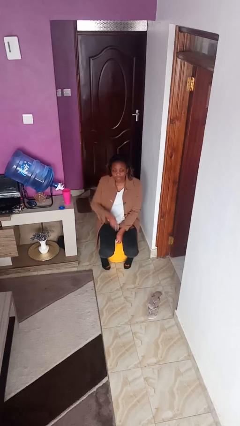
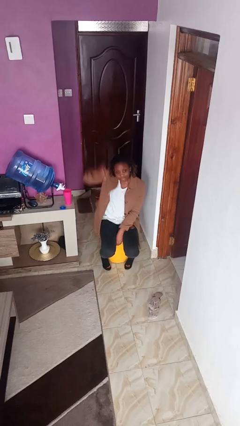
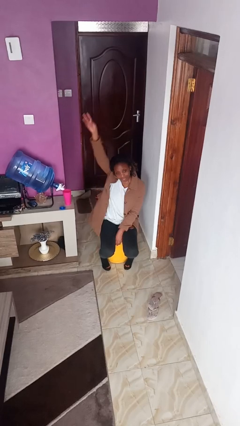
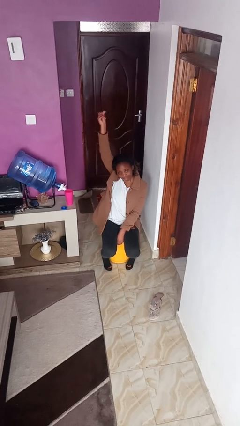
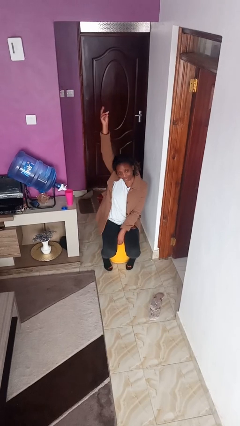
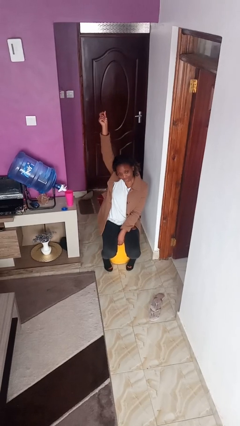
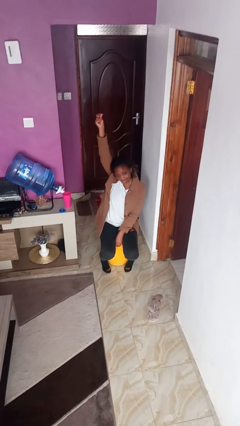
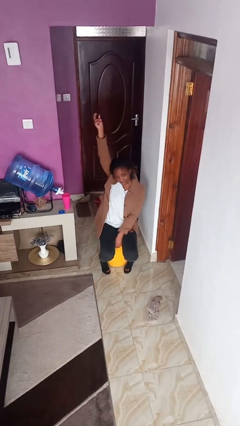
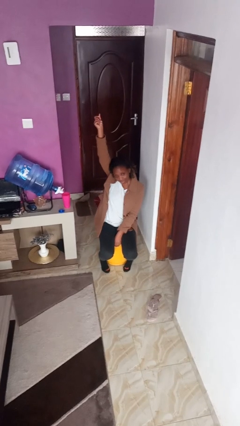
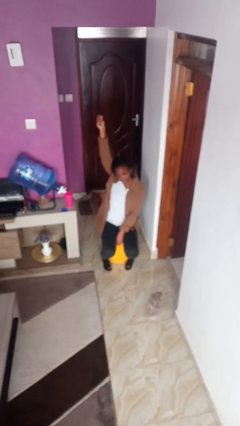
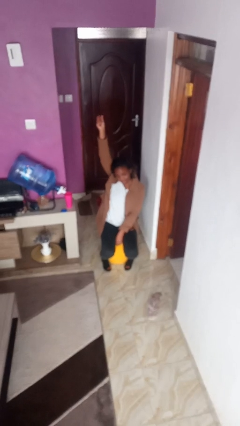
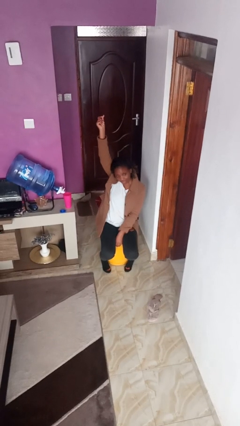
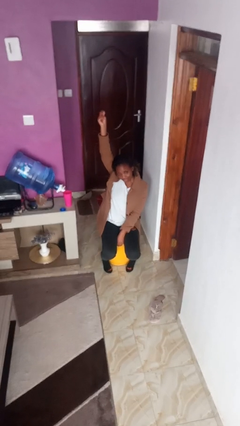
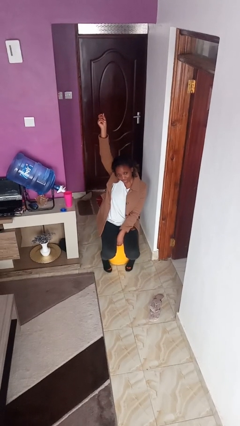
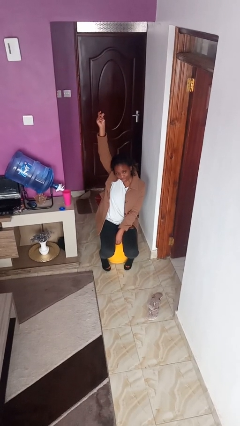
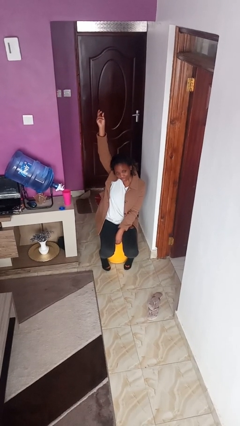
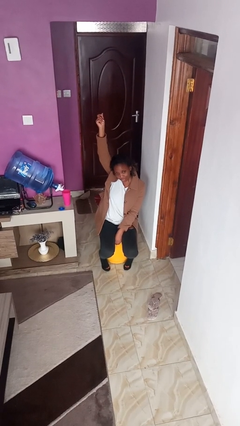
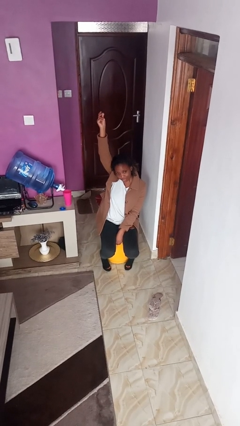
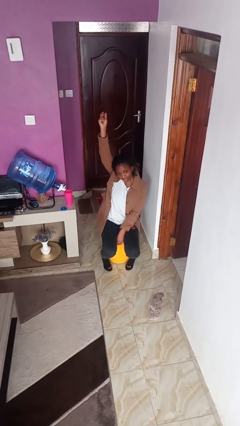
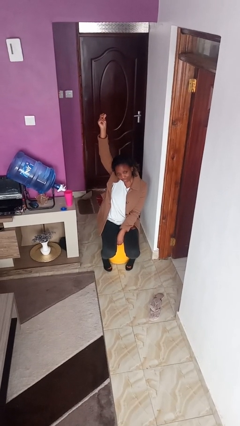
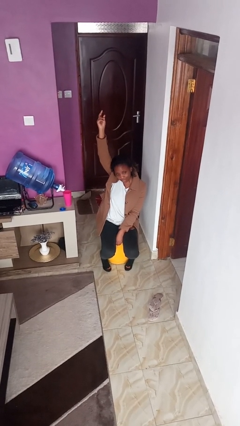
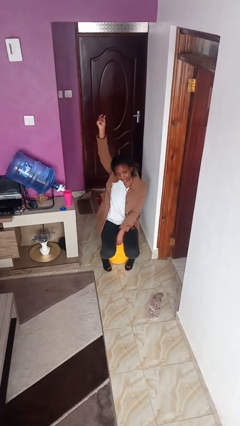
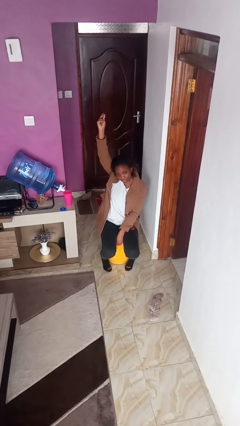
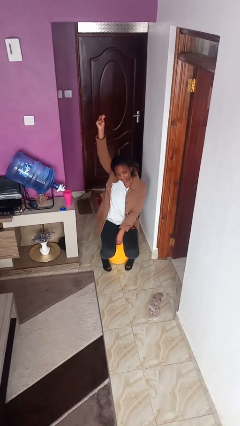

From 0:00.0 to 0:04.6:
person gestures raise hand

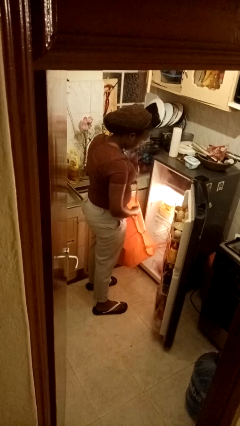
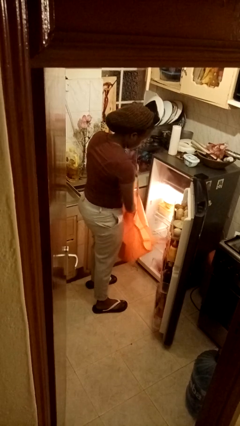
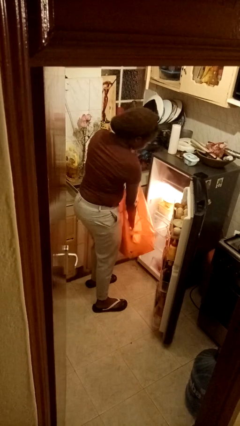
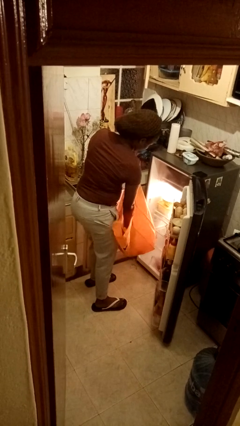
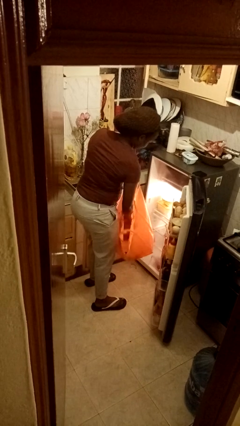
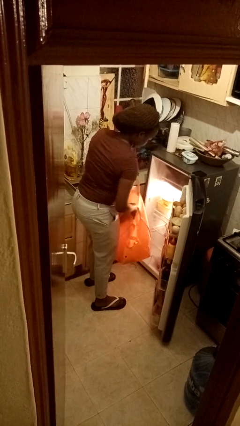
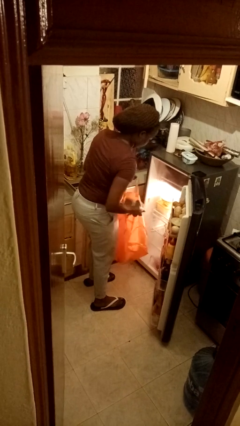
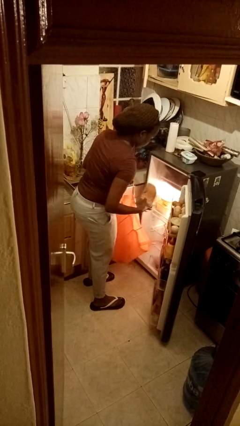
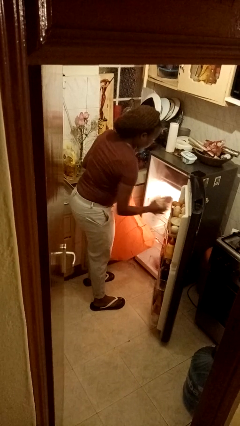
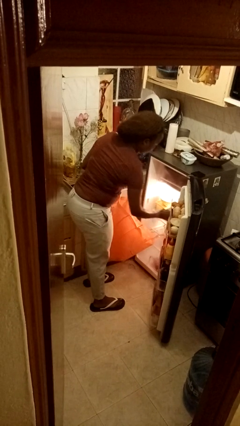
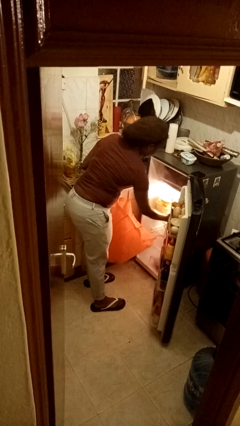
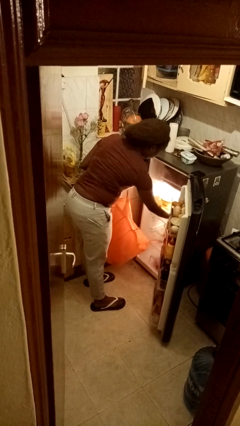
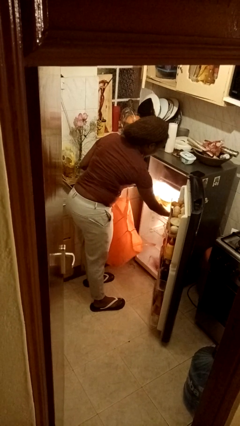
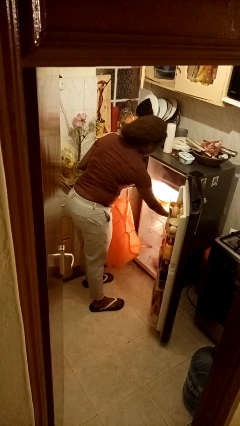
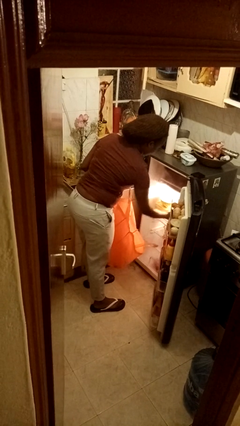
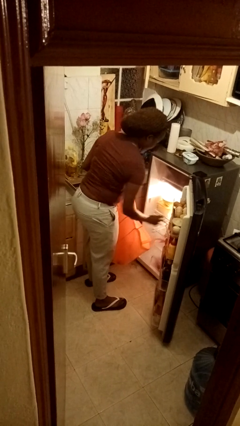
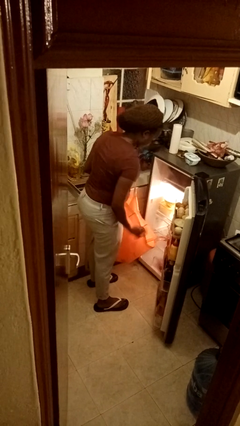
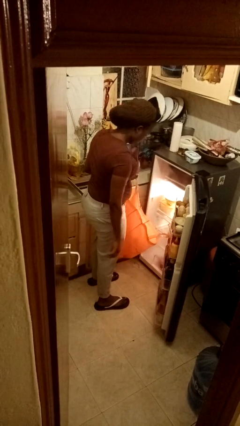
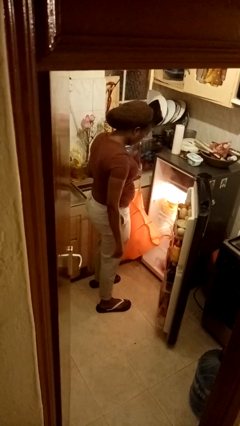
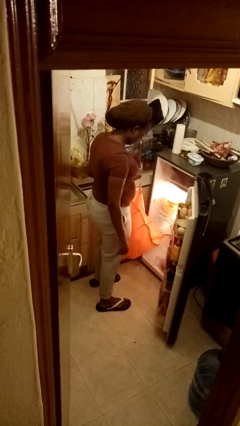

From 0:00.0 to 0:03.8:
person loads groceries into refrigerator

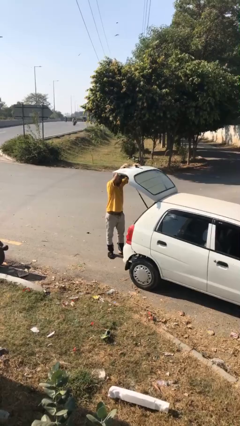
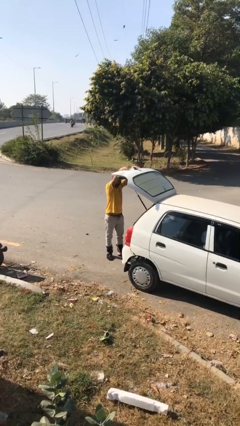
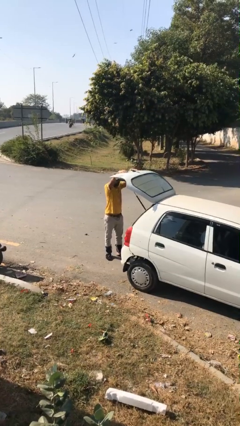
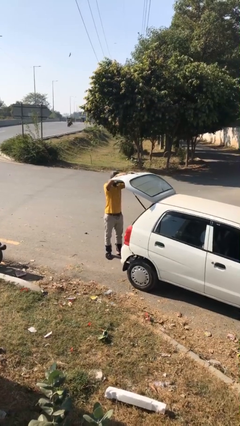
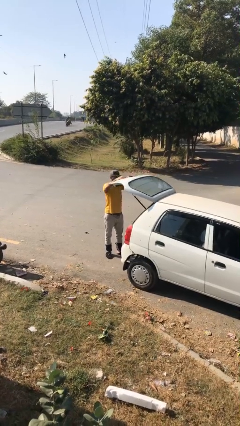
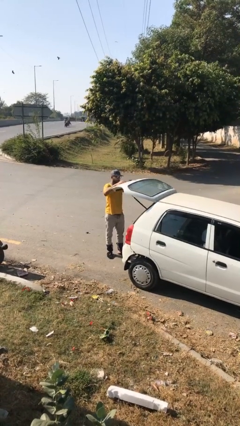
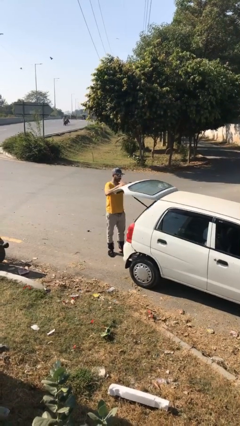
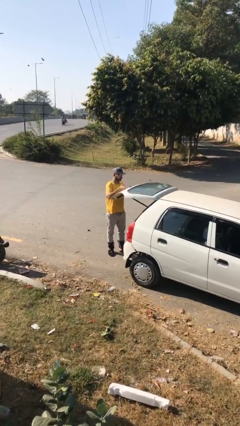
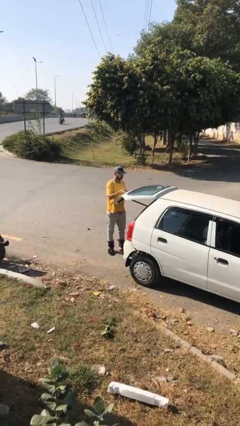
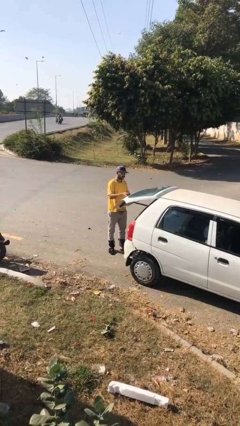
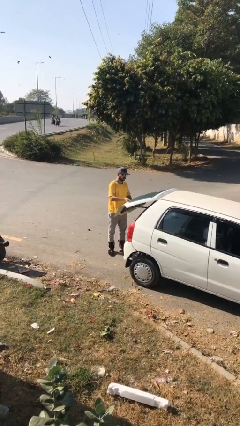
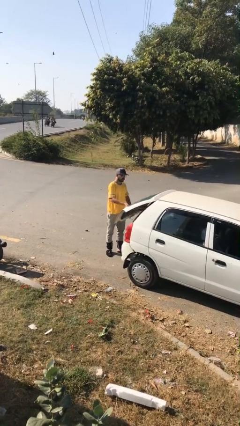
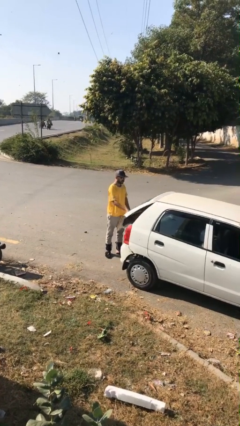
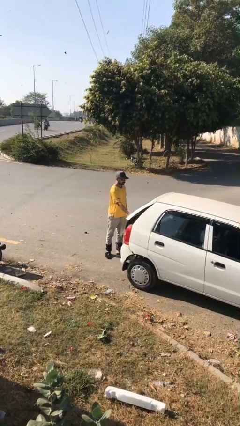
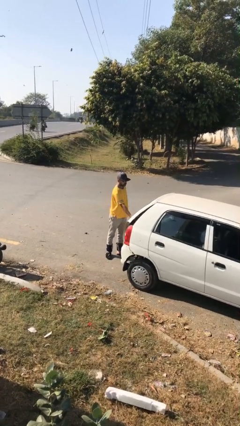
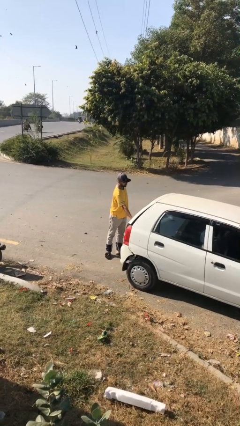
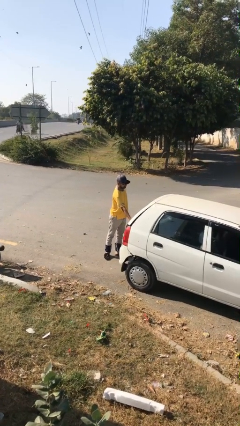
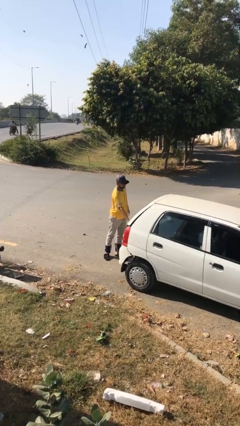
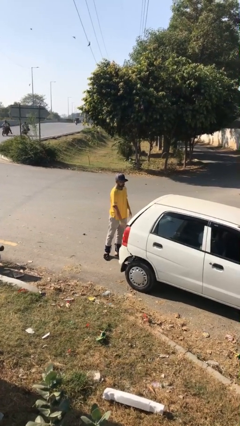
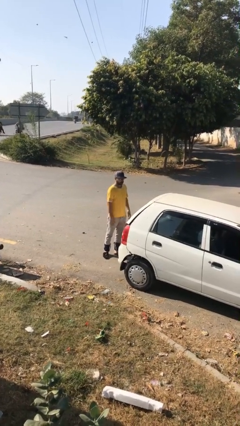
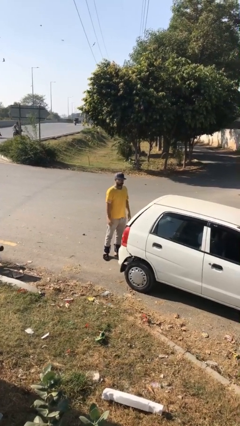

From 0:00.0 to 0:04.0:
person closes car trunk

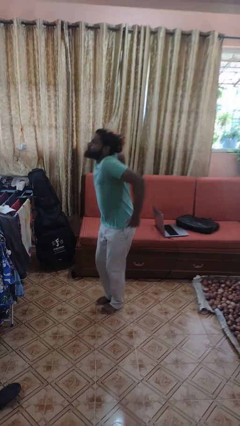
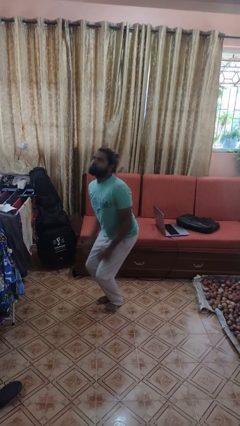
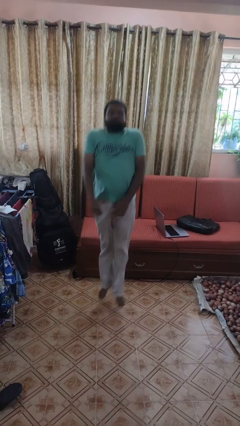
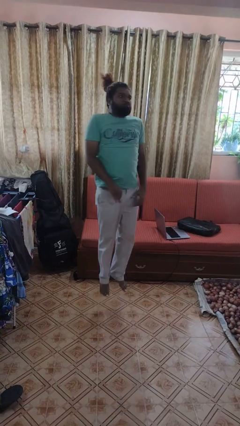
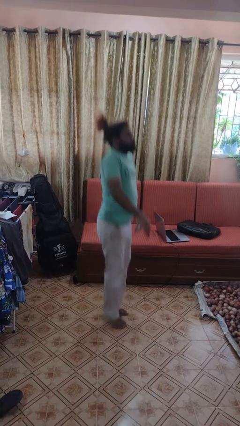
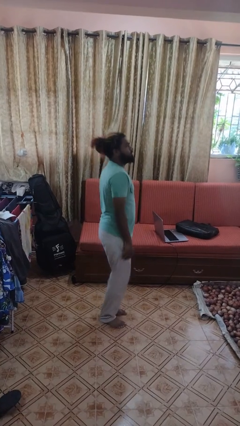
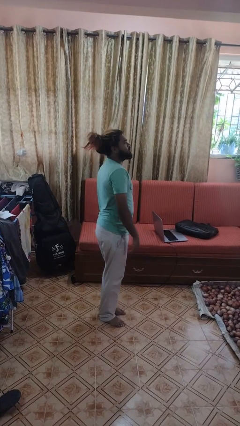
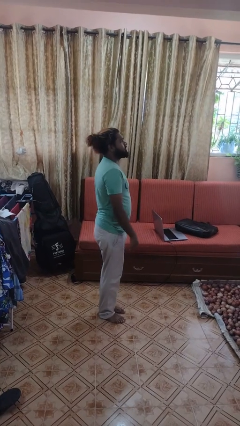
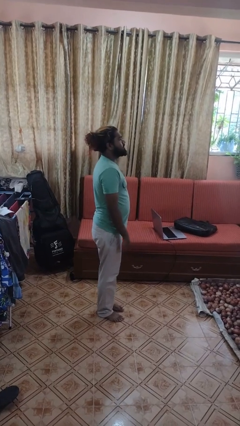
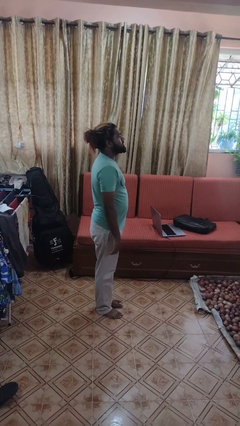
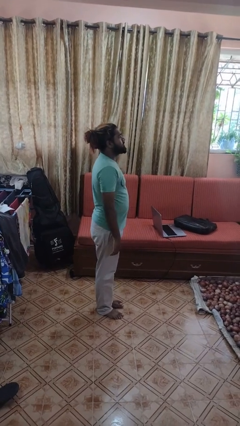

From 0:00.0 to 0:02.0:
person jumps

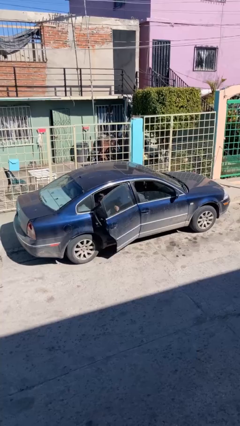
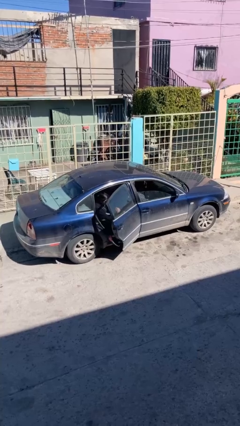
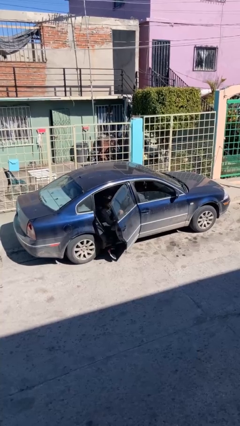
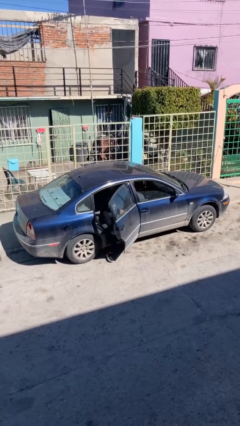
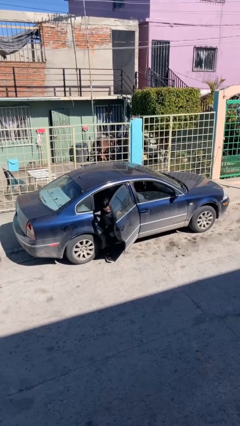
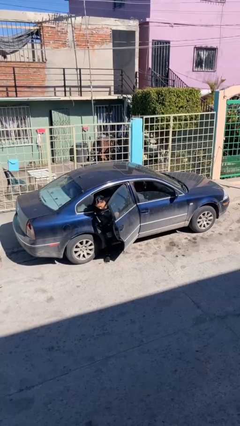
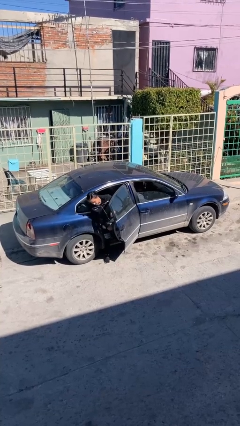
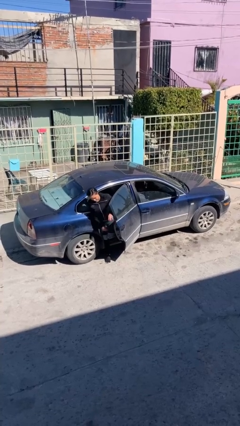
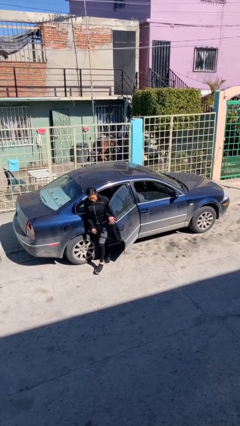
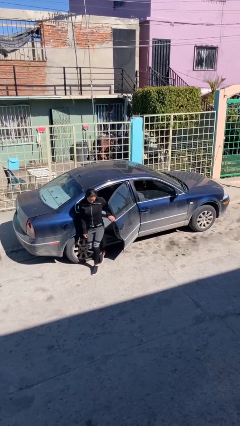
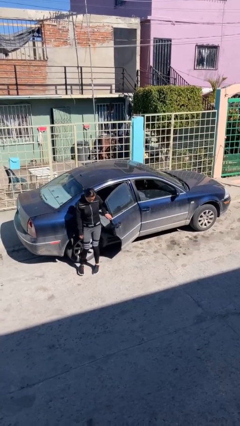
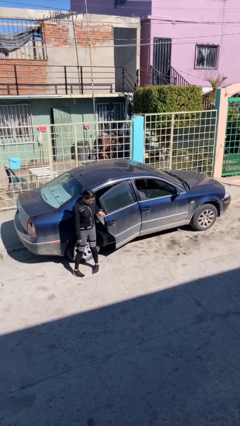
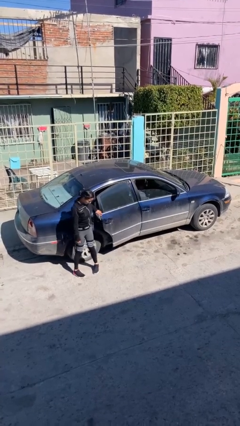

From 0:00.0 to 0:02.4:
car drops off person

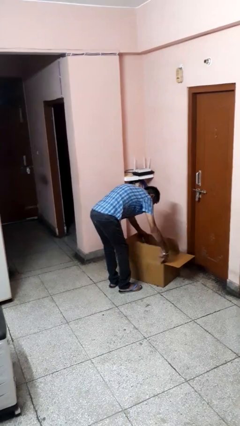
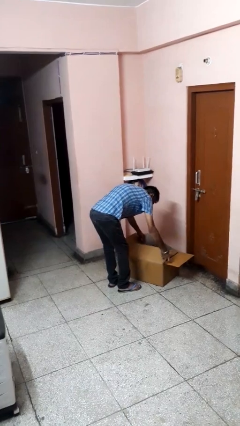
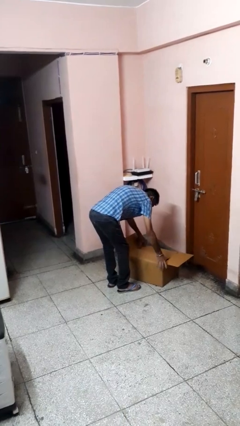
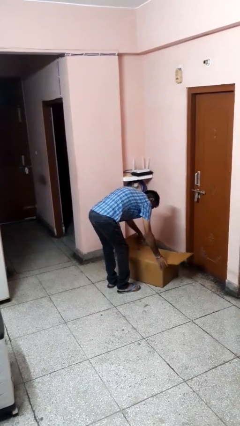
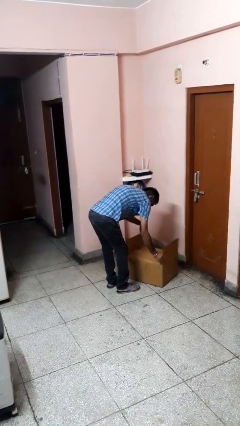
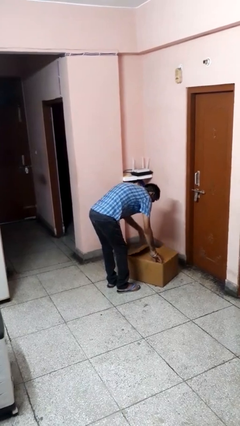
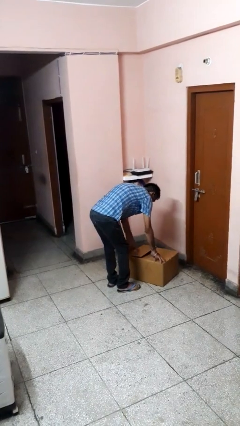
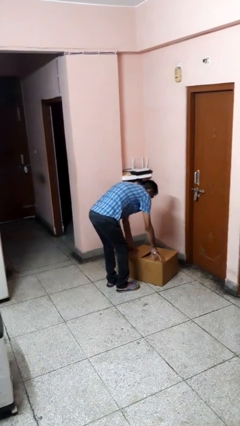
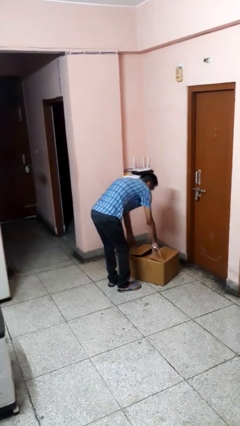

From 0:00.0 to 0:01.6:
person closes box
